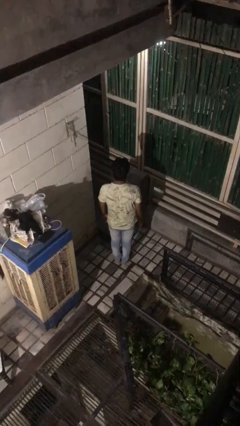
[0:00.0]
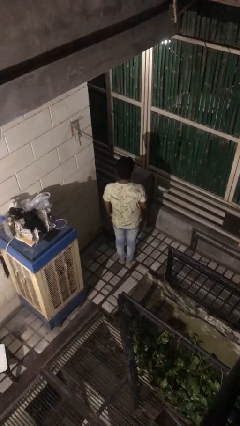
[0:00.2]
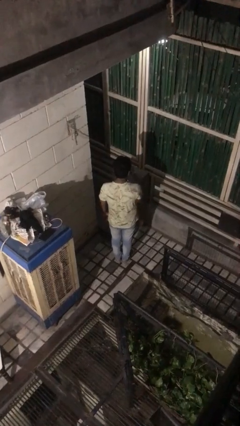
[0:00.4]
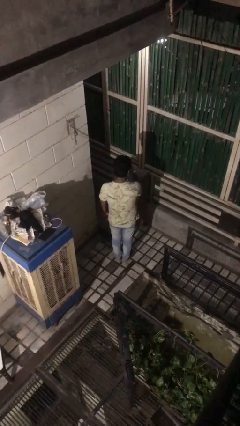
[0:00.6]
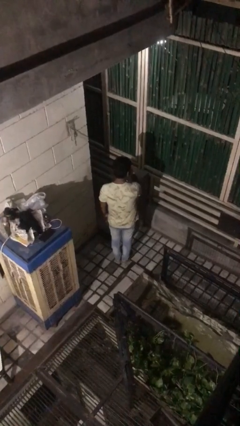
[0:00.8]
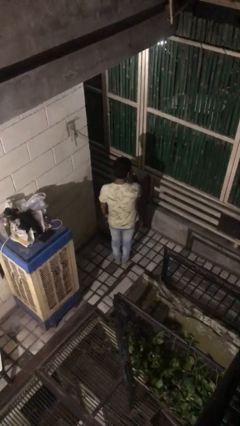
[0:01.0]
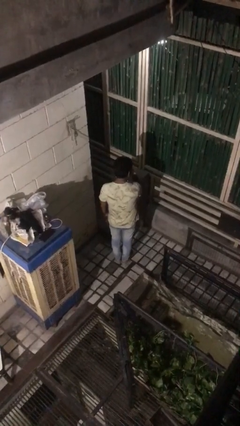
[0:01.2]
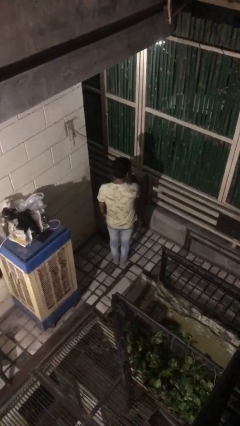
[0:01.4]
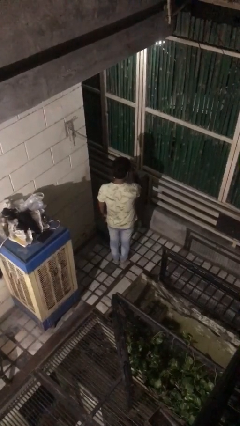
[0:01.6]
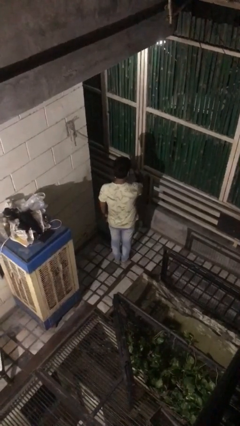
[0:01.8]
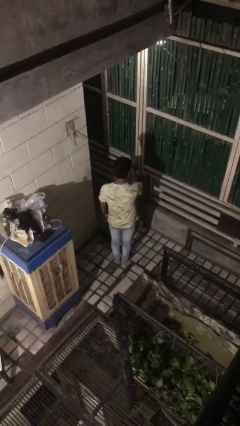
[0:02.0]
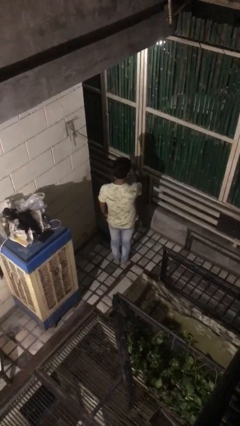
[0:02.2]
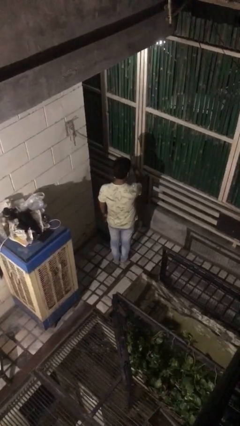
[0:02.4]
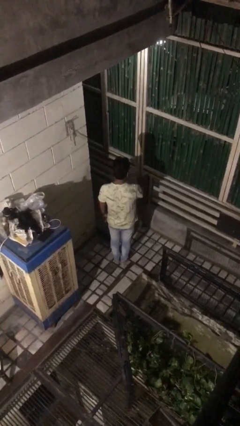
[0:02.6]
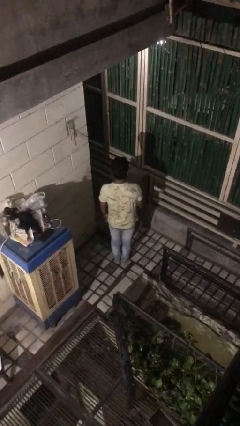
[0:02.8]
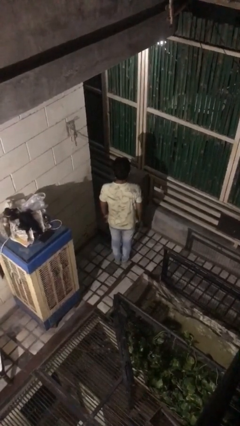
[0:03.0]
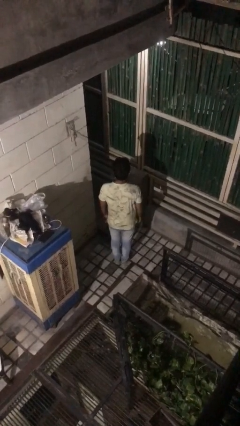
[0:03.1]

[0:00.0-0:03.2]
person gestures watch closely

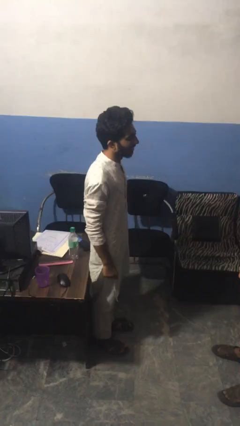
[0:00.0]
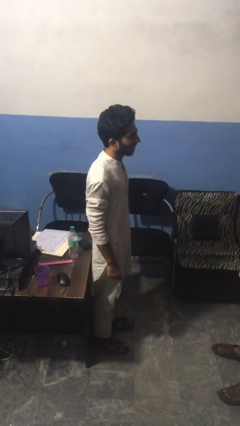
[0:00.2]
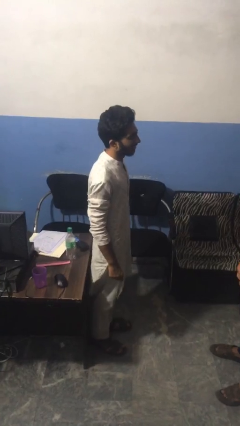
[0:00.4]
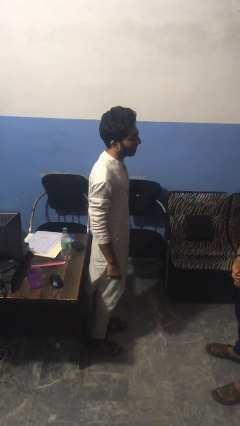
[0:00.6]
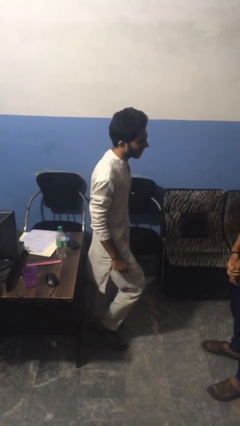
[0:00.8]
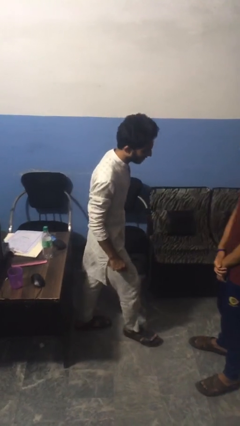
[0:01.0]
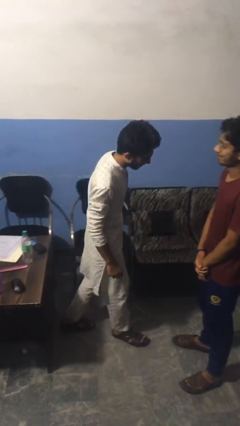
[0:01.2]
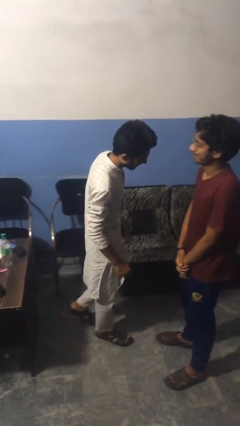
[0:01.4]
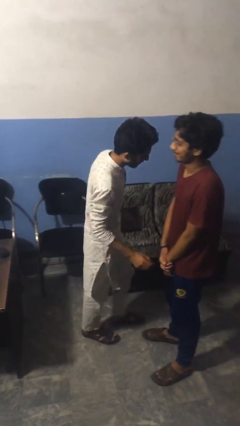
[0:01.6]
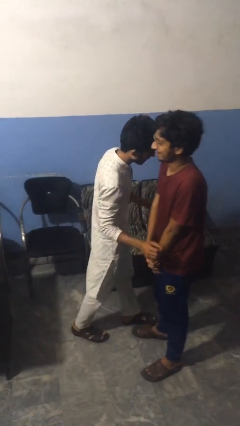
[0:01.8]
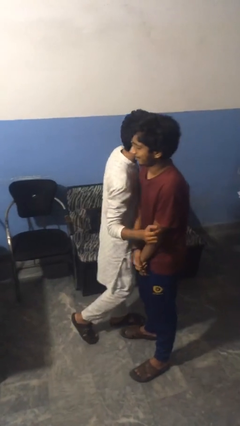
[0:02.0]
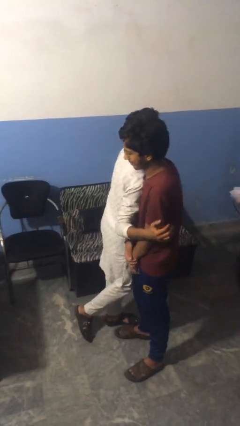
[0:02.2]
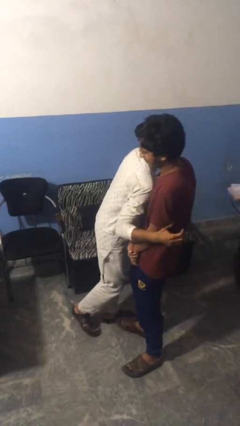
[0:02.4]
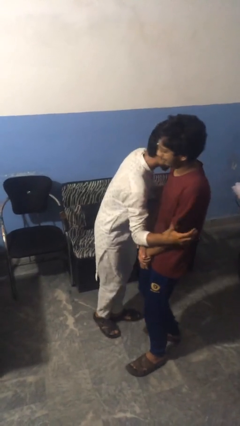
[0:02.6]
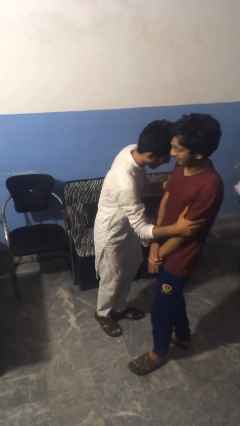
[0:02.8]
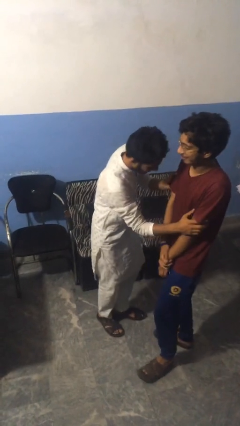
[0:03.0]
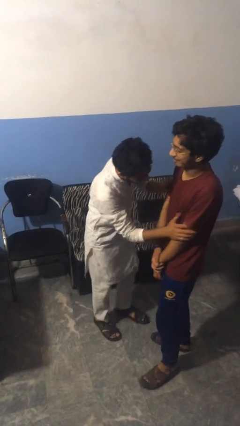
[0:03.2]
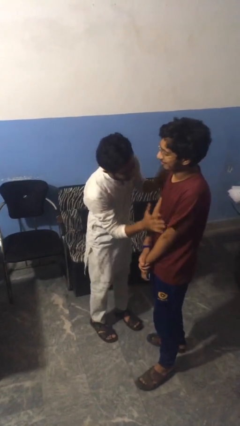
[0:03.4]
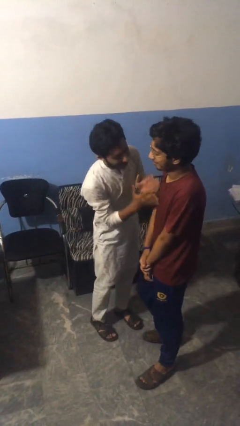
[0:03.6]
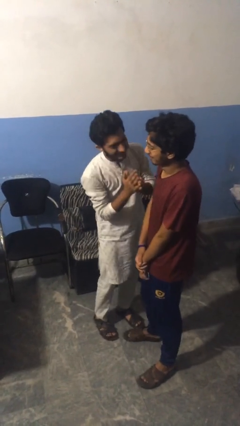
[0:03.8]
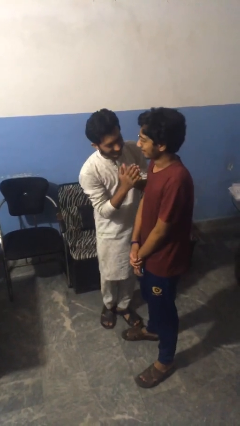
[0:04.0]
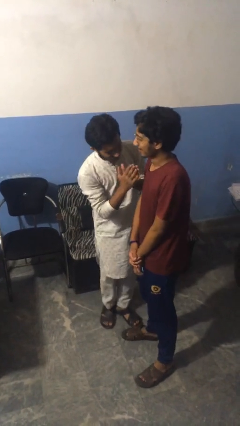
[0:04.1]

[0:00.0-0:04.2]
person bumps into person

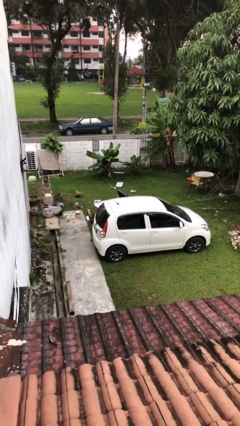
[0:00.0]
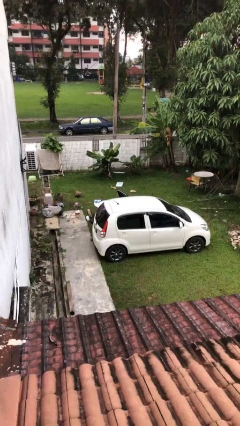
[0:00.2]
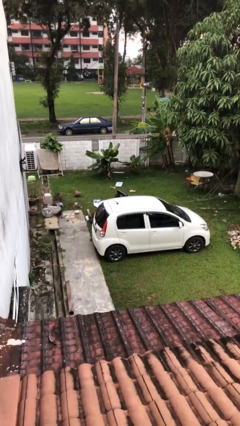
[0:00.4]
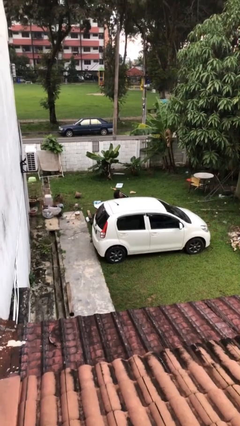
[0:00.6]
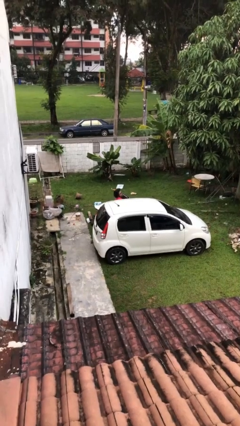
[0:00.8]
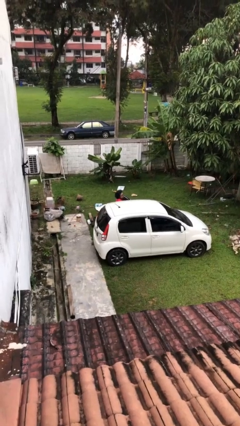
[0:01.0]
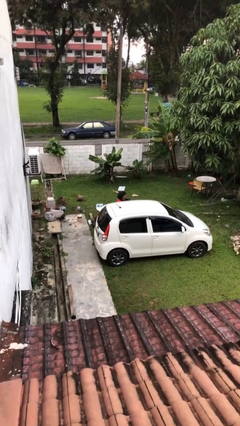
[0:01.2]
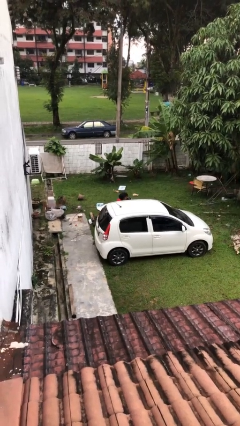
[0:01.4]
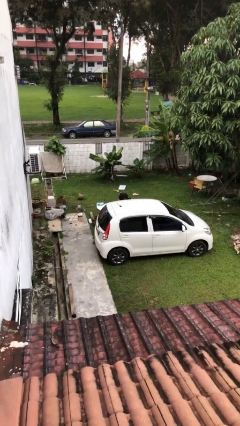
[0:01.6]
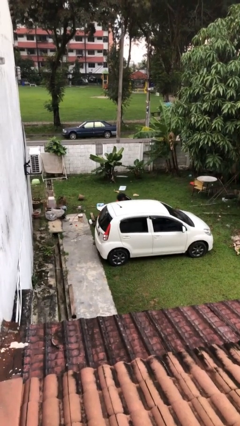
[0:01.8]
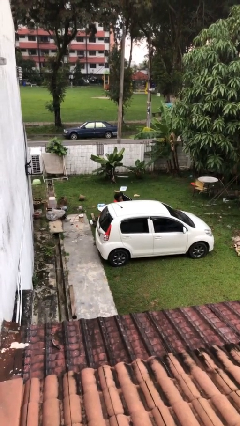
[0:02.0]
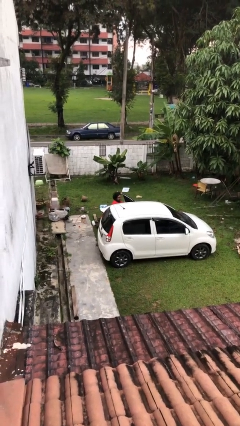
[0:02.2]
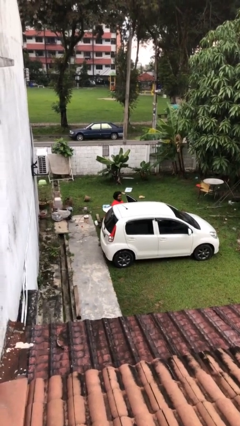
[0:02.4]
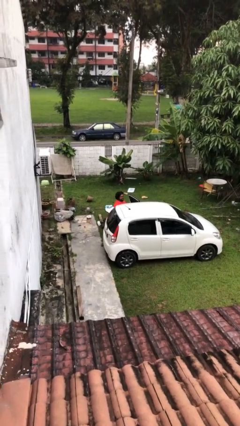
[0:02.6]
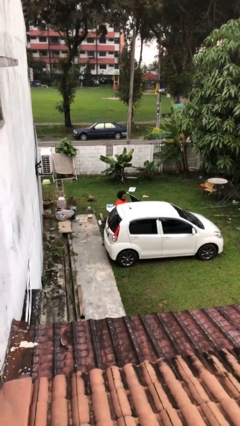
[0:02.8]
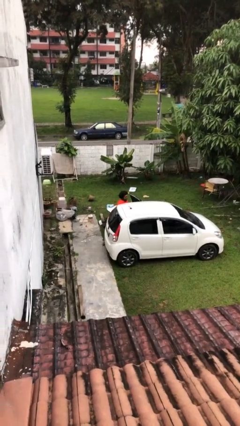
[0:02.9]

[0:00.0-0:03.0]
person exits car

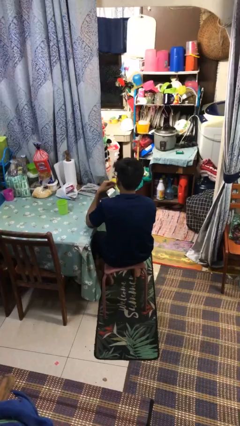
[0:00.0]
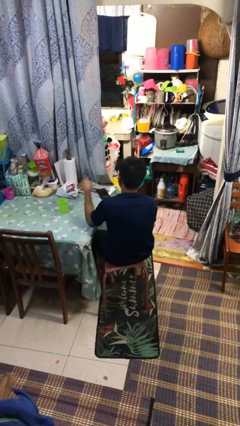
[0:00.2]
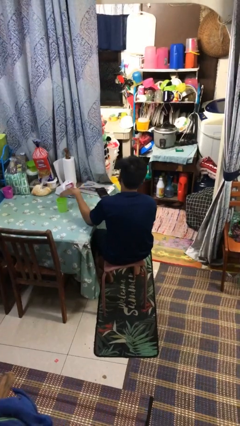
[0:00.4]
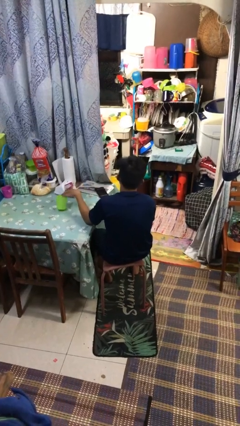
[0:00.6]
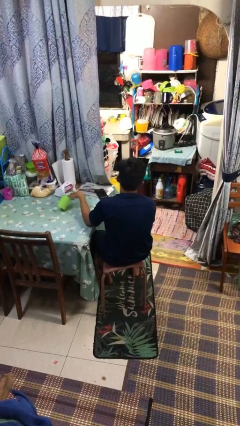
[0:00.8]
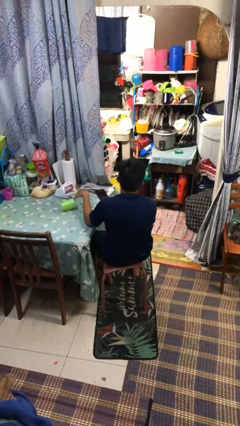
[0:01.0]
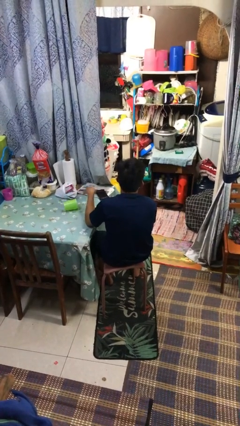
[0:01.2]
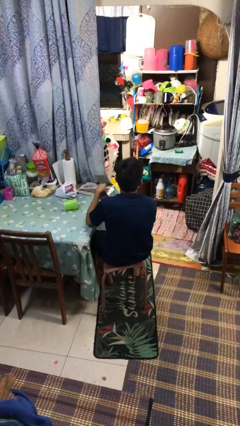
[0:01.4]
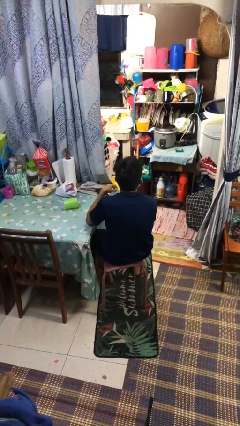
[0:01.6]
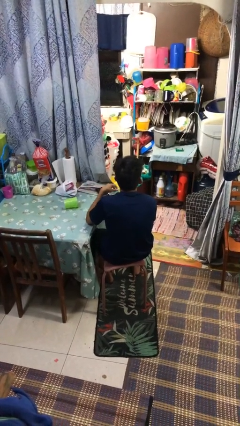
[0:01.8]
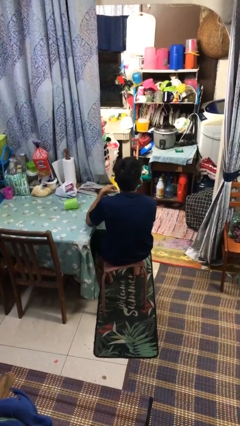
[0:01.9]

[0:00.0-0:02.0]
person knocks over glass

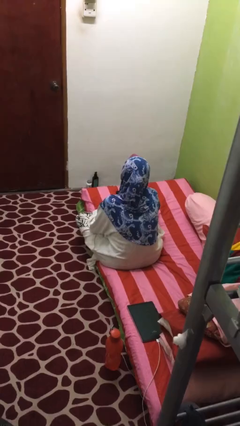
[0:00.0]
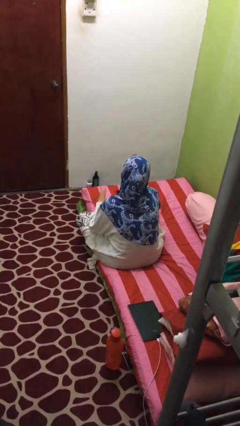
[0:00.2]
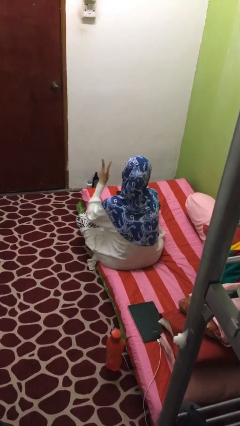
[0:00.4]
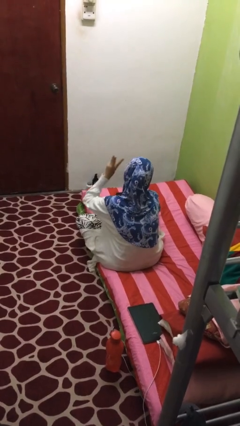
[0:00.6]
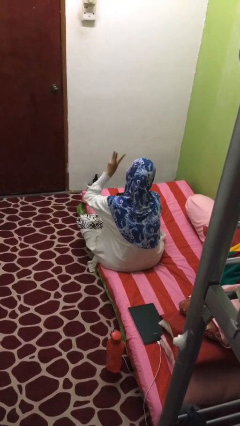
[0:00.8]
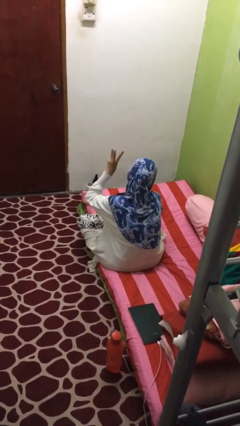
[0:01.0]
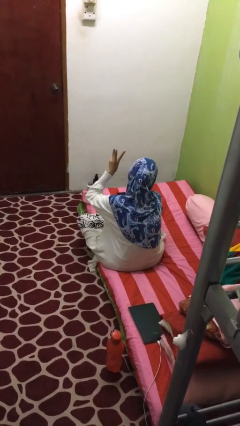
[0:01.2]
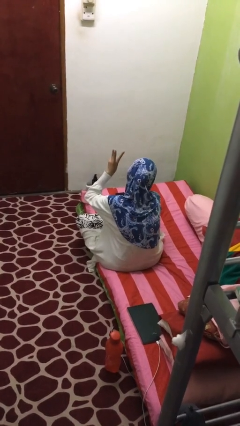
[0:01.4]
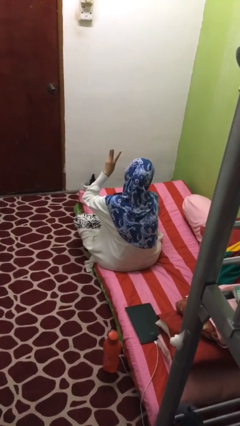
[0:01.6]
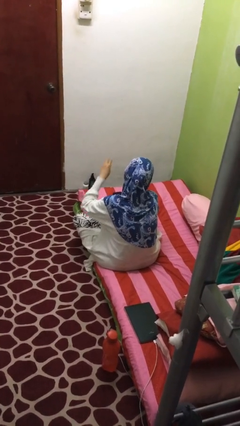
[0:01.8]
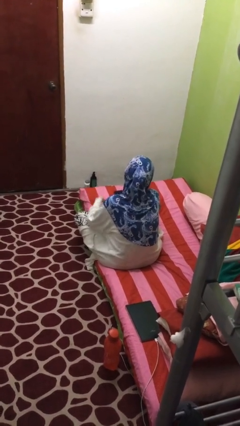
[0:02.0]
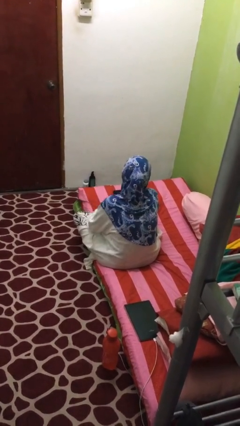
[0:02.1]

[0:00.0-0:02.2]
person gestures number three

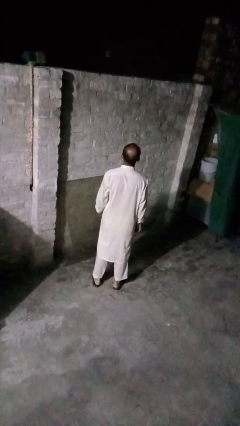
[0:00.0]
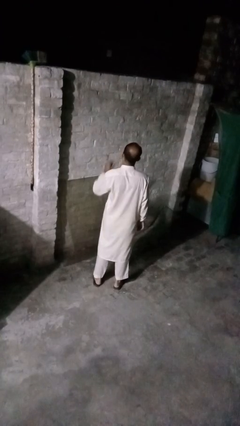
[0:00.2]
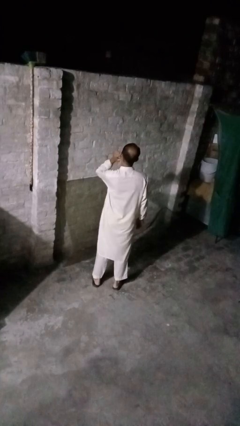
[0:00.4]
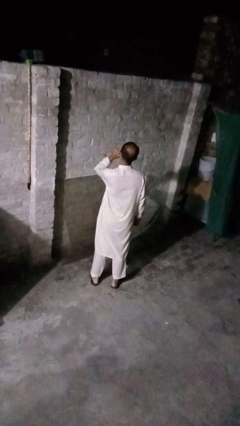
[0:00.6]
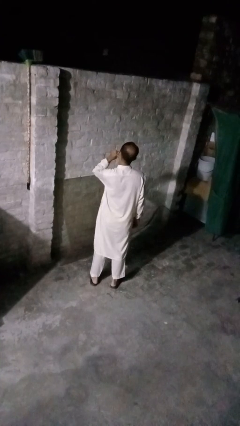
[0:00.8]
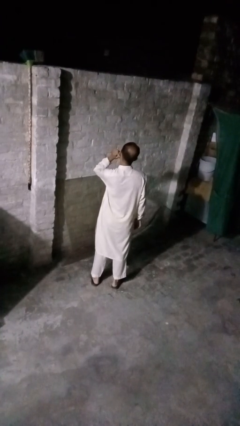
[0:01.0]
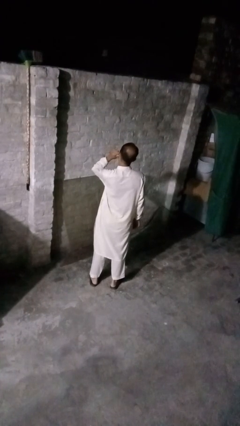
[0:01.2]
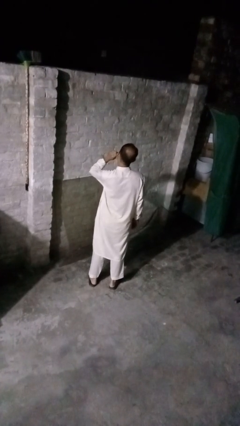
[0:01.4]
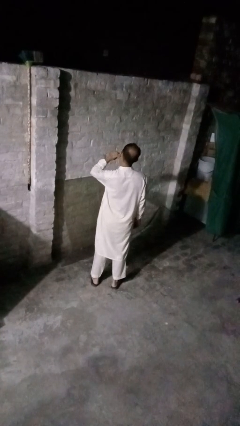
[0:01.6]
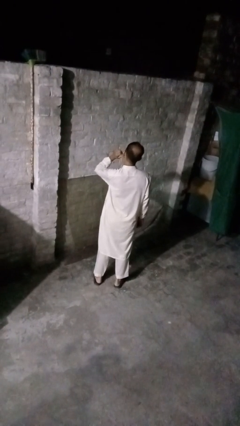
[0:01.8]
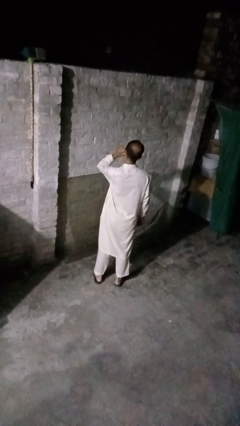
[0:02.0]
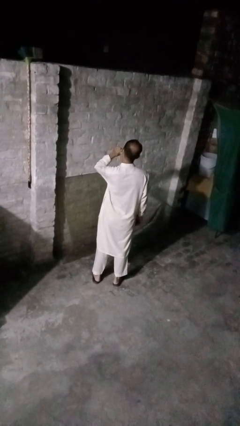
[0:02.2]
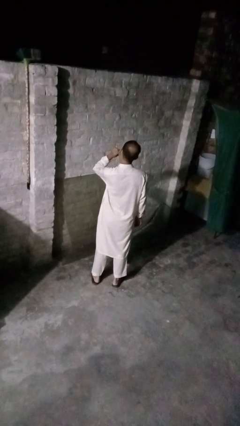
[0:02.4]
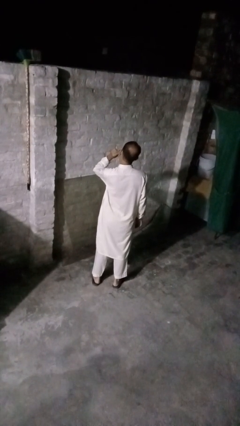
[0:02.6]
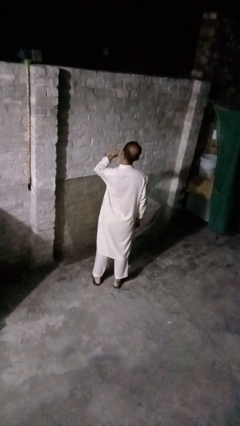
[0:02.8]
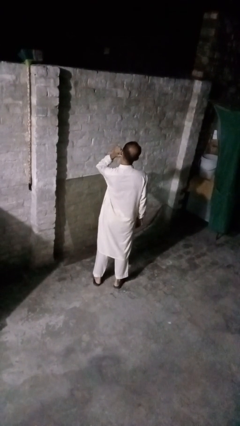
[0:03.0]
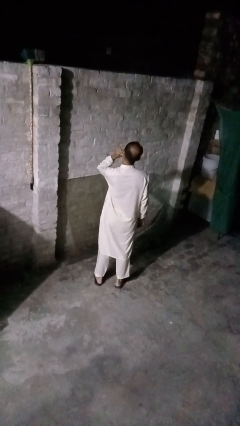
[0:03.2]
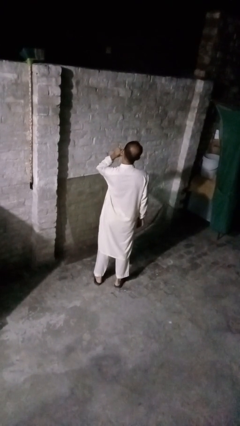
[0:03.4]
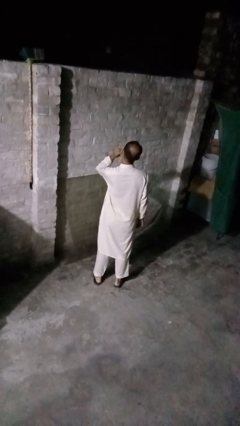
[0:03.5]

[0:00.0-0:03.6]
person touches earlobe
